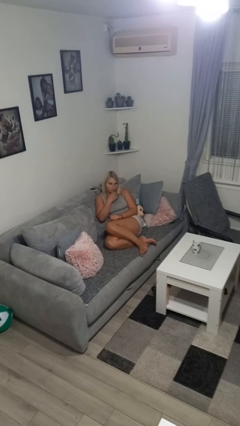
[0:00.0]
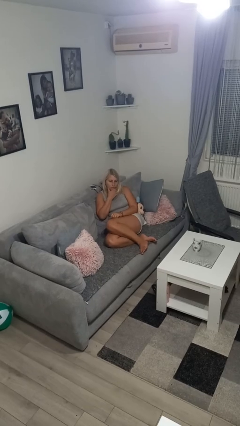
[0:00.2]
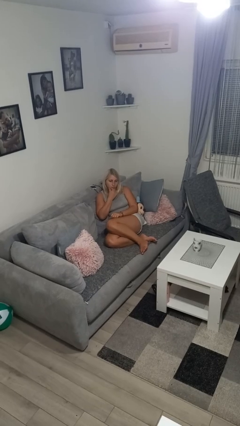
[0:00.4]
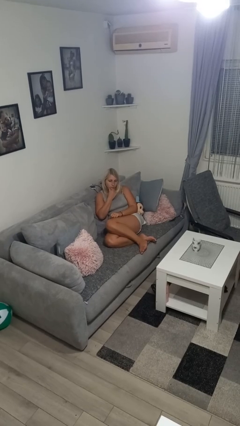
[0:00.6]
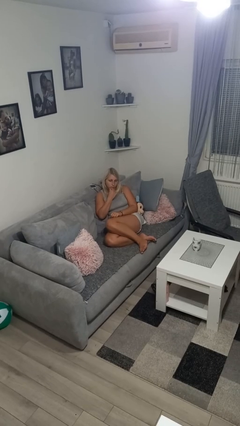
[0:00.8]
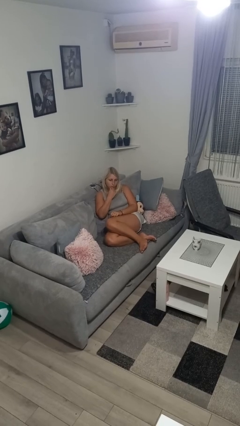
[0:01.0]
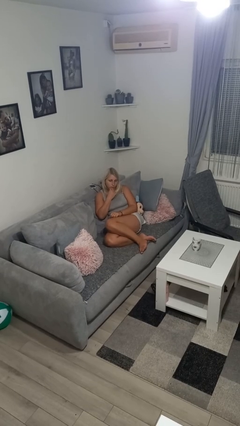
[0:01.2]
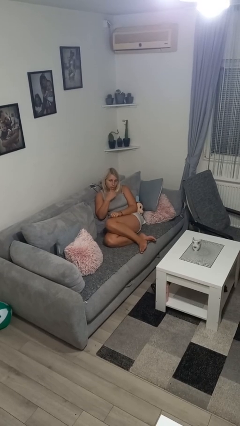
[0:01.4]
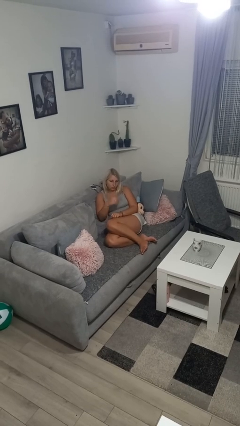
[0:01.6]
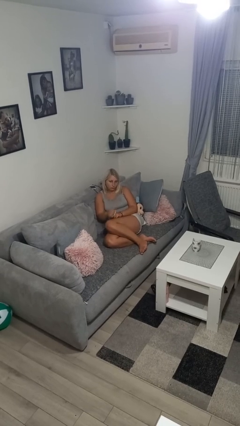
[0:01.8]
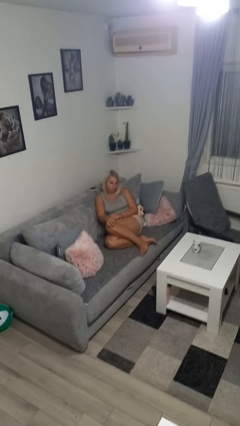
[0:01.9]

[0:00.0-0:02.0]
person strokes chin

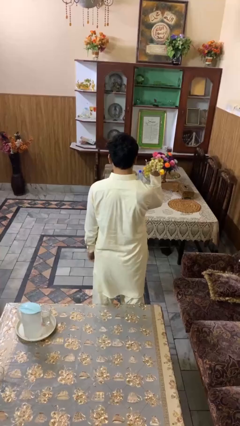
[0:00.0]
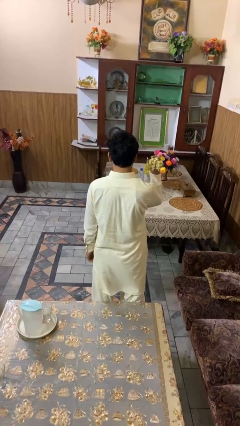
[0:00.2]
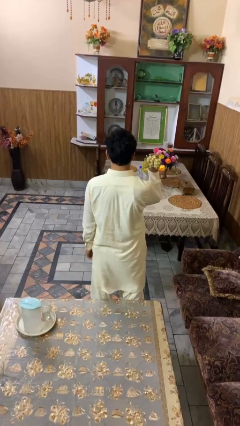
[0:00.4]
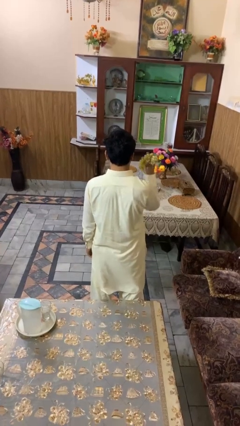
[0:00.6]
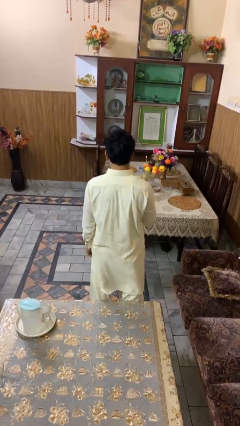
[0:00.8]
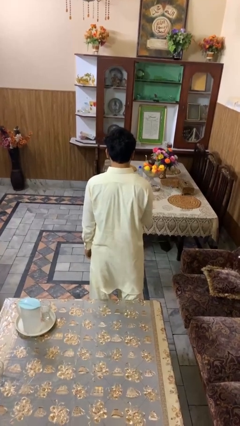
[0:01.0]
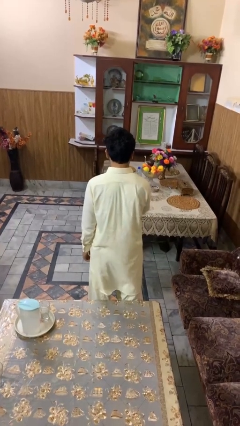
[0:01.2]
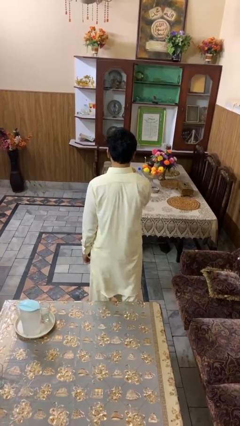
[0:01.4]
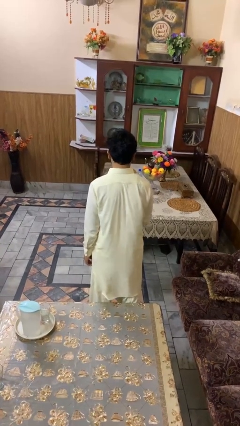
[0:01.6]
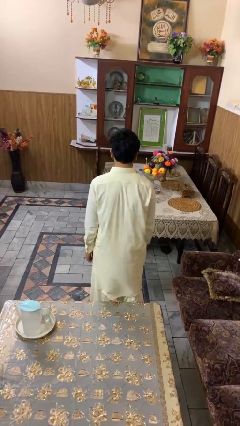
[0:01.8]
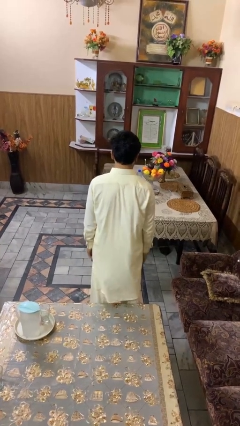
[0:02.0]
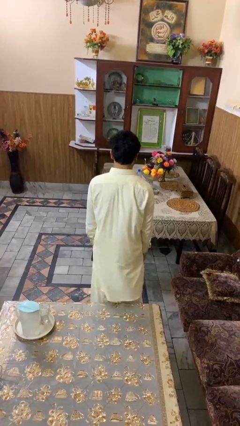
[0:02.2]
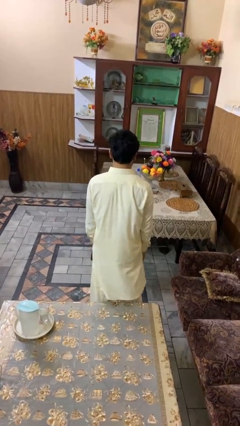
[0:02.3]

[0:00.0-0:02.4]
person throws object on table

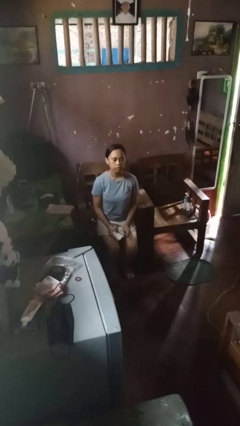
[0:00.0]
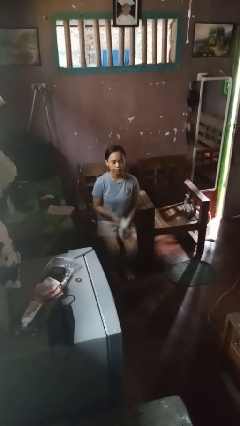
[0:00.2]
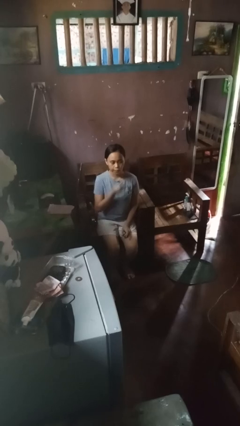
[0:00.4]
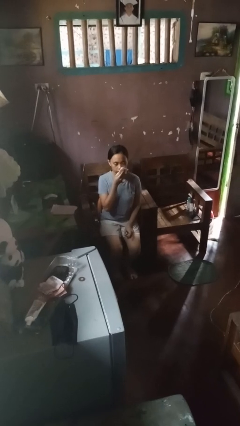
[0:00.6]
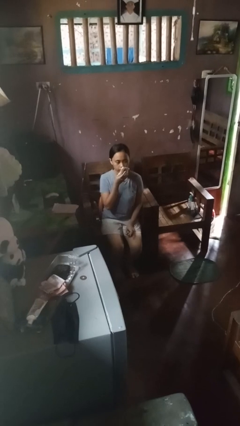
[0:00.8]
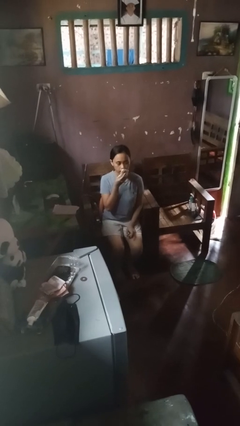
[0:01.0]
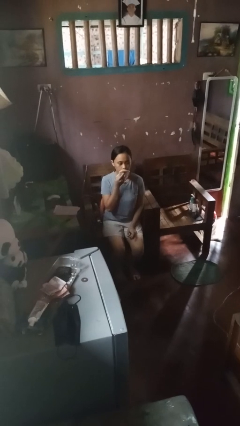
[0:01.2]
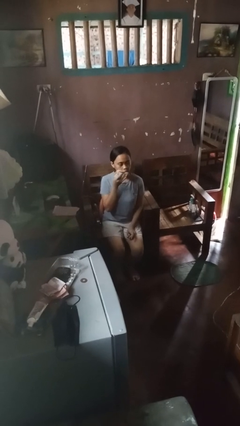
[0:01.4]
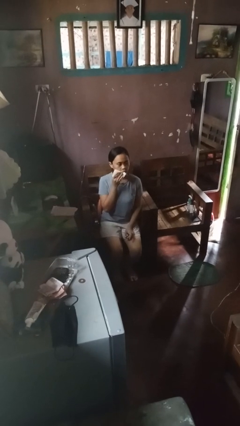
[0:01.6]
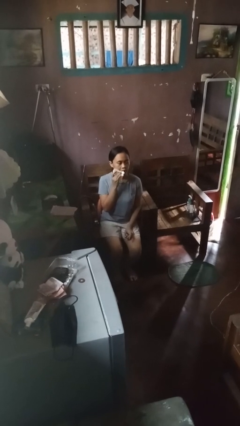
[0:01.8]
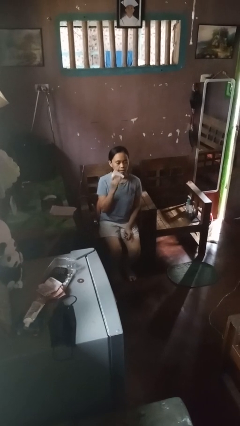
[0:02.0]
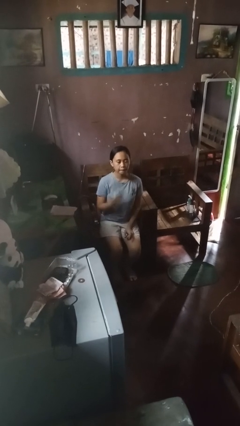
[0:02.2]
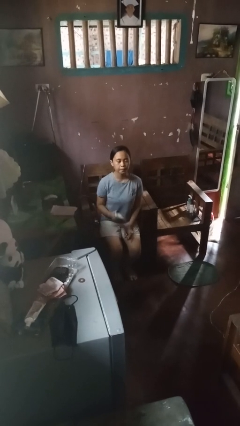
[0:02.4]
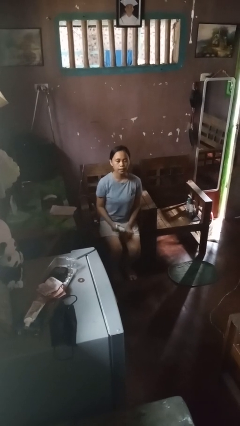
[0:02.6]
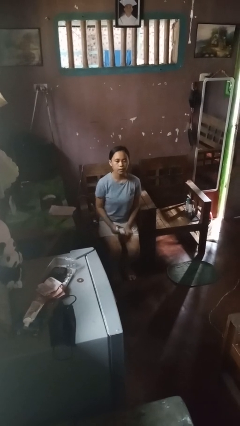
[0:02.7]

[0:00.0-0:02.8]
person wipes mouth with napkin

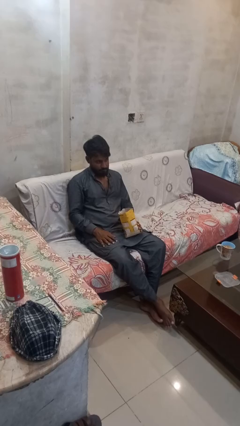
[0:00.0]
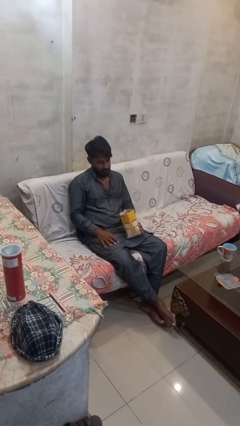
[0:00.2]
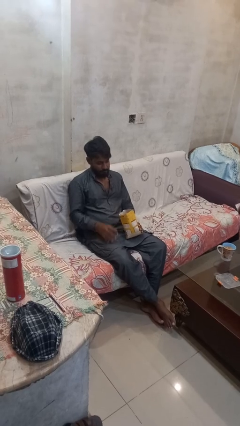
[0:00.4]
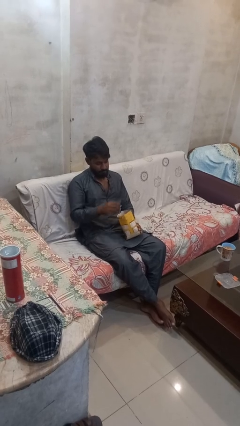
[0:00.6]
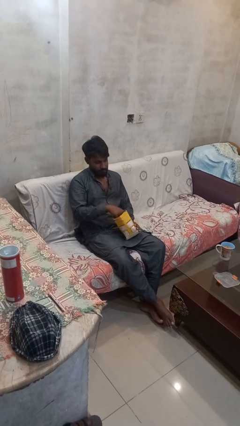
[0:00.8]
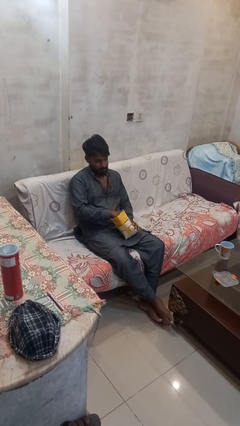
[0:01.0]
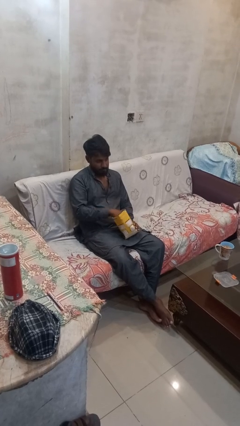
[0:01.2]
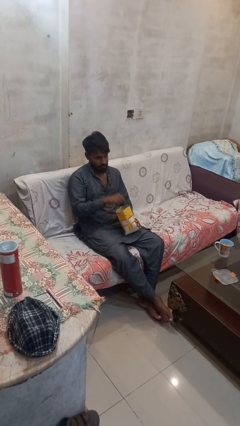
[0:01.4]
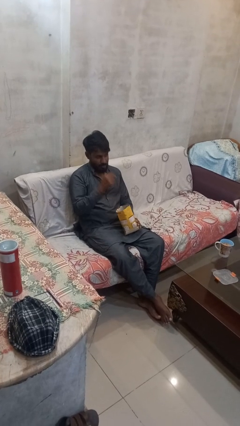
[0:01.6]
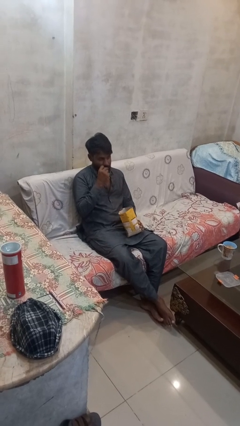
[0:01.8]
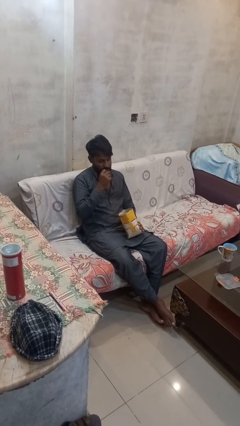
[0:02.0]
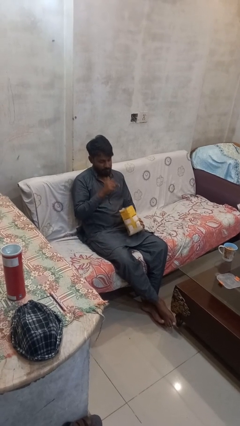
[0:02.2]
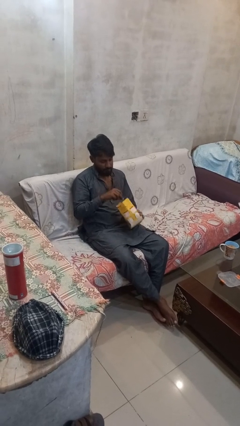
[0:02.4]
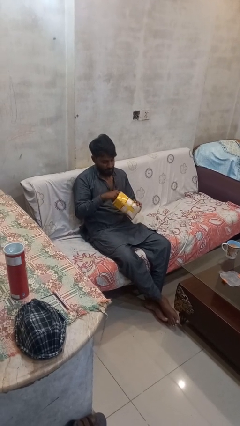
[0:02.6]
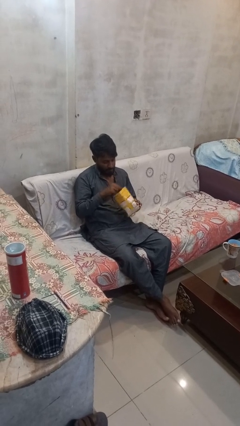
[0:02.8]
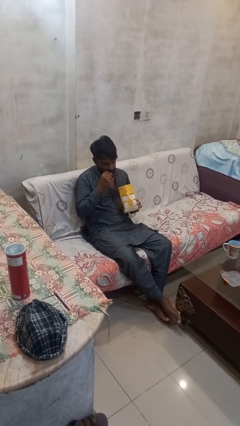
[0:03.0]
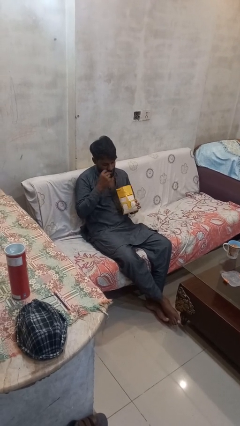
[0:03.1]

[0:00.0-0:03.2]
person eats snack from bag

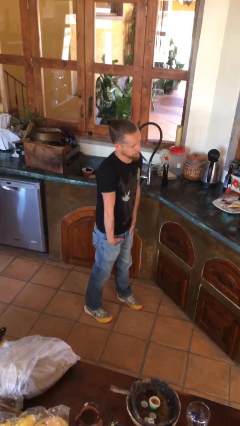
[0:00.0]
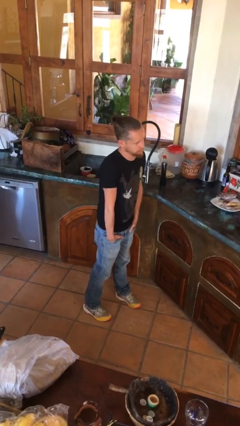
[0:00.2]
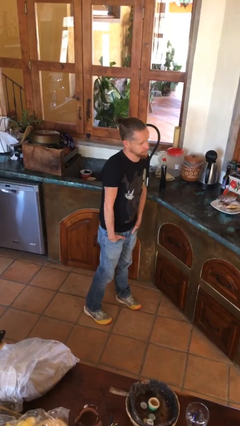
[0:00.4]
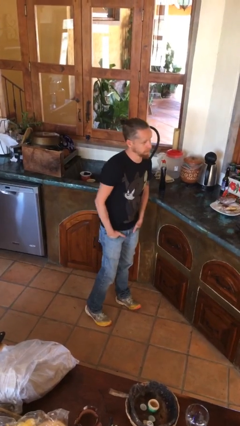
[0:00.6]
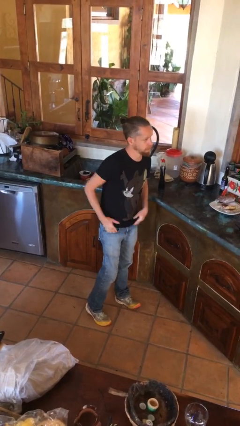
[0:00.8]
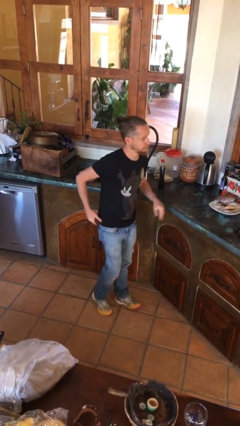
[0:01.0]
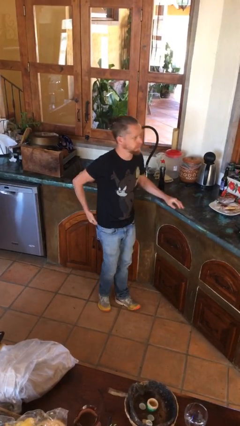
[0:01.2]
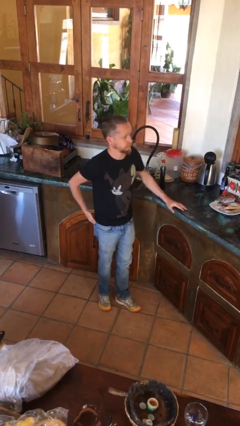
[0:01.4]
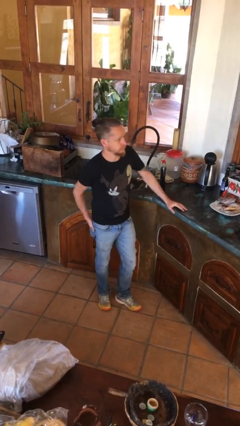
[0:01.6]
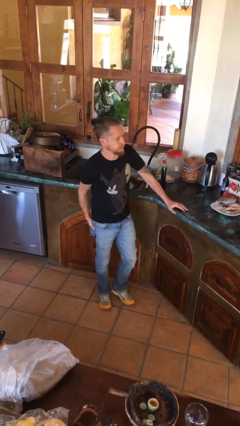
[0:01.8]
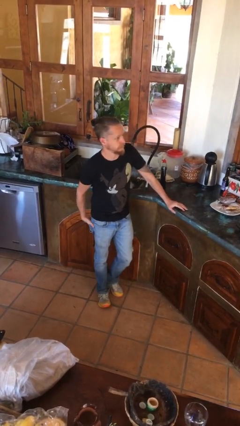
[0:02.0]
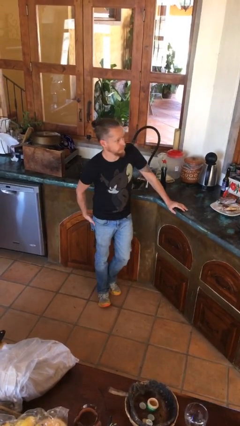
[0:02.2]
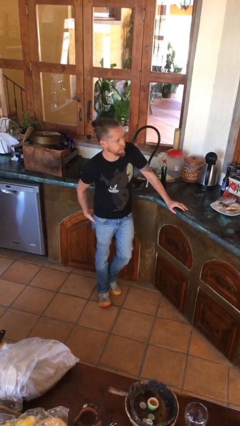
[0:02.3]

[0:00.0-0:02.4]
person puts hands in back pockets

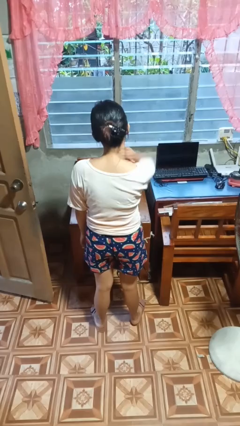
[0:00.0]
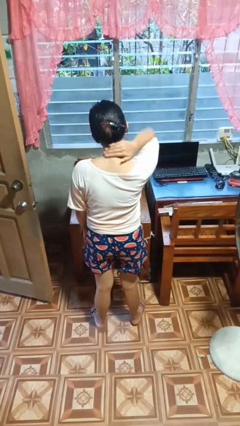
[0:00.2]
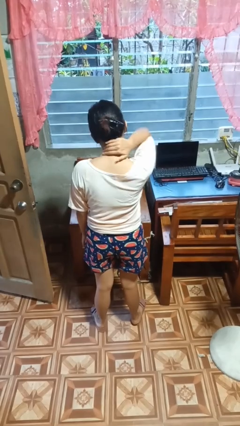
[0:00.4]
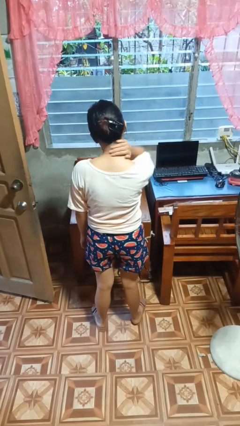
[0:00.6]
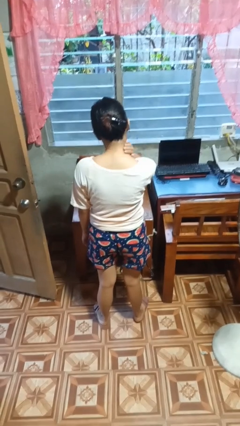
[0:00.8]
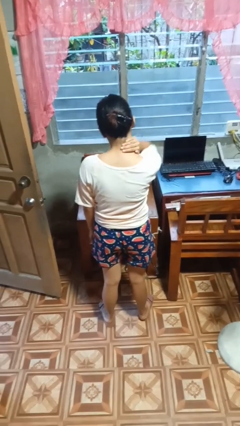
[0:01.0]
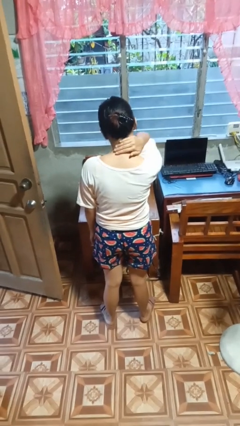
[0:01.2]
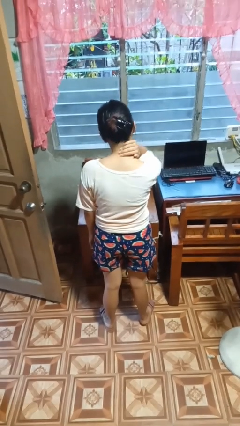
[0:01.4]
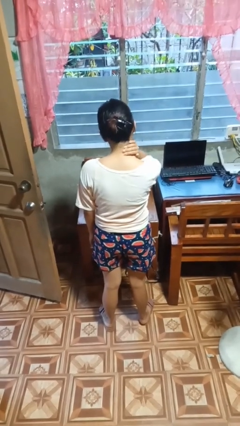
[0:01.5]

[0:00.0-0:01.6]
person rubs neck

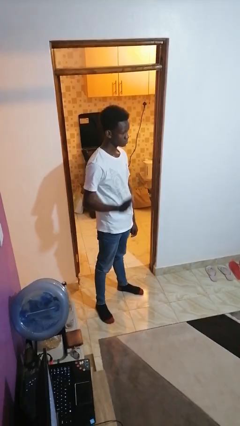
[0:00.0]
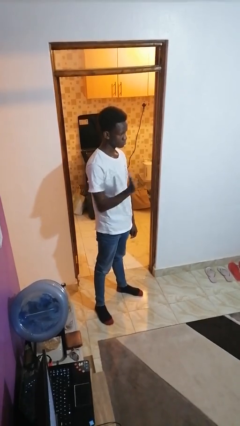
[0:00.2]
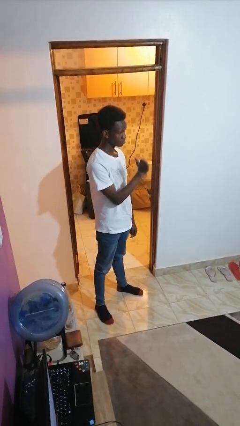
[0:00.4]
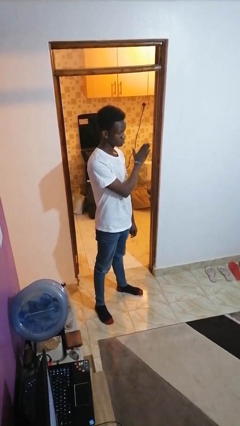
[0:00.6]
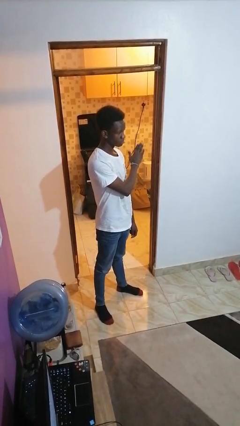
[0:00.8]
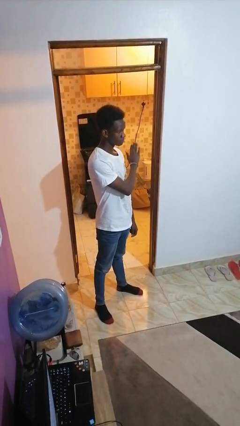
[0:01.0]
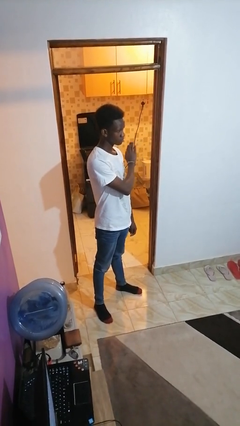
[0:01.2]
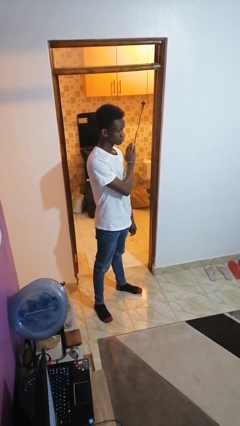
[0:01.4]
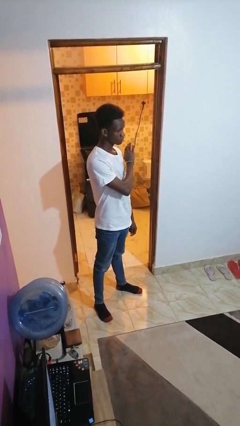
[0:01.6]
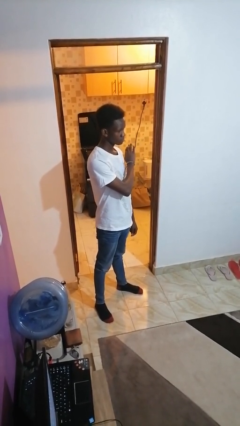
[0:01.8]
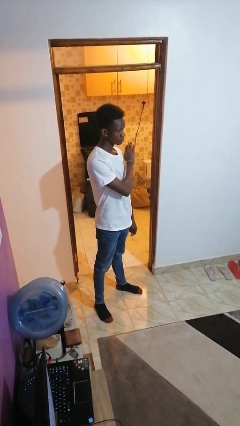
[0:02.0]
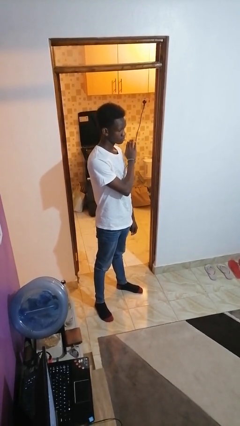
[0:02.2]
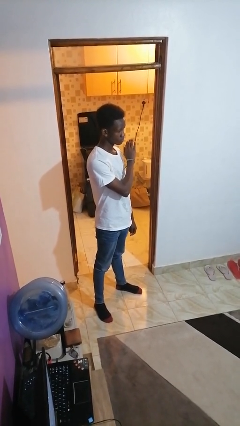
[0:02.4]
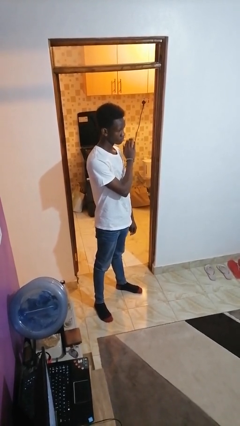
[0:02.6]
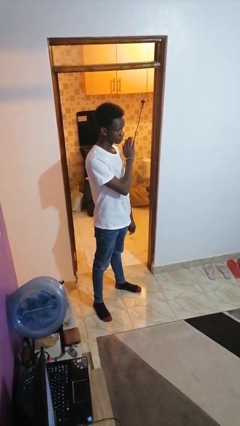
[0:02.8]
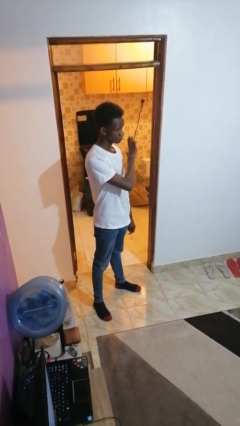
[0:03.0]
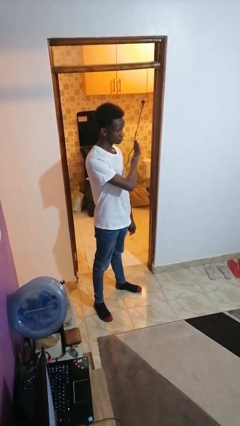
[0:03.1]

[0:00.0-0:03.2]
person gestures swipe left
